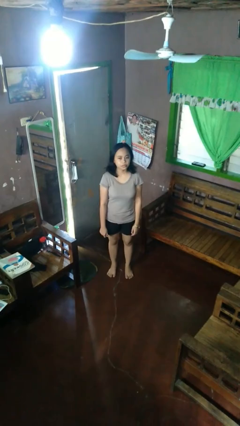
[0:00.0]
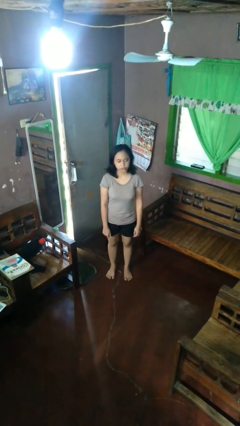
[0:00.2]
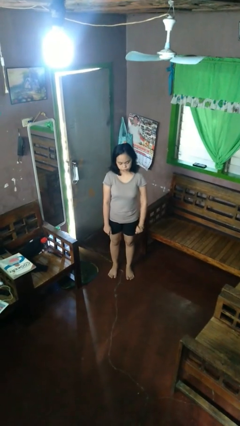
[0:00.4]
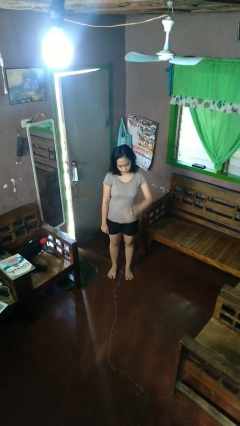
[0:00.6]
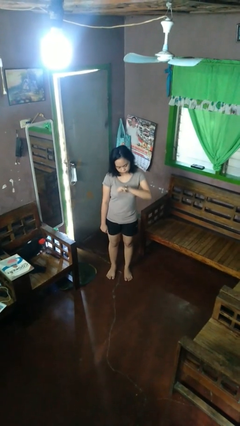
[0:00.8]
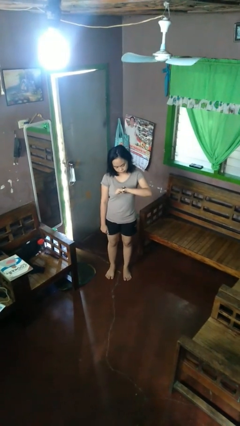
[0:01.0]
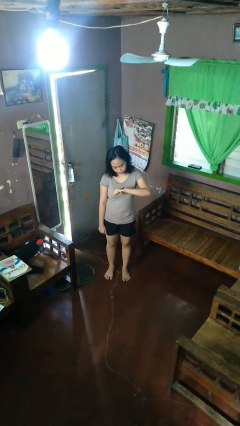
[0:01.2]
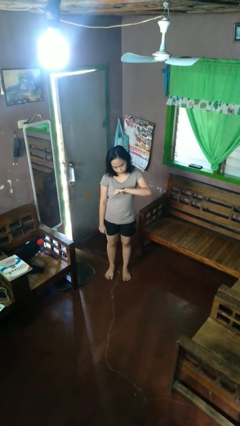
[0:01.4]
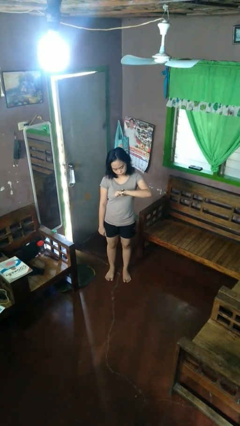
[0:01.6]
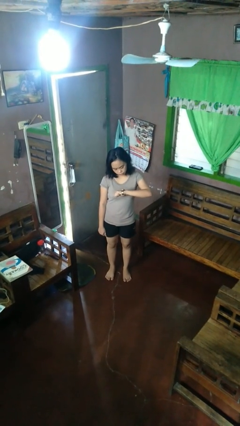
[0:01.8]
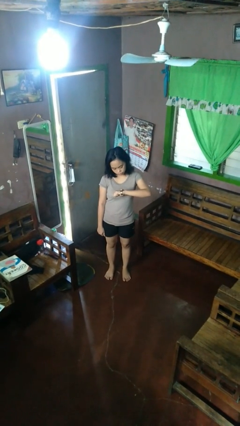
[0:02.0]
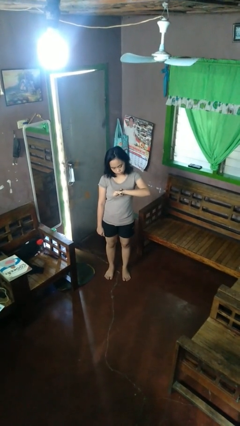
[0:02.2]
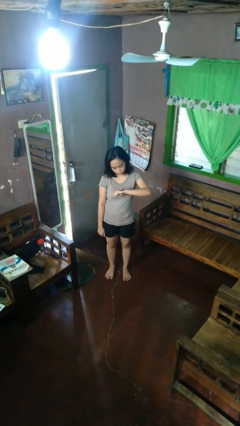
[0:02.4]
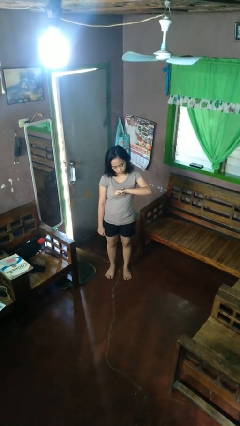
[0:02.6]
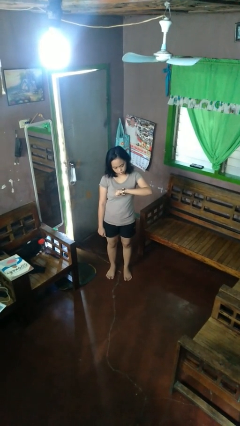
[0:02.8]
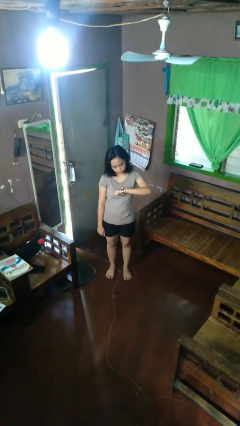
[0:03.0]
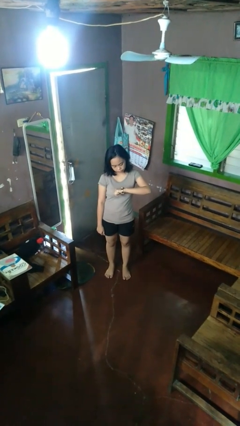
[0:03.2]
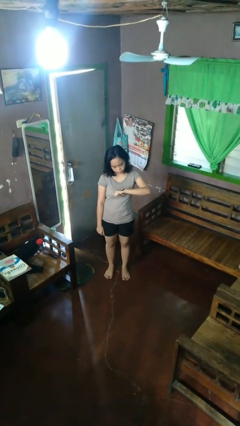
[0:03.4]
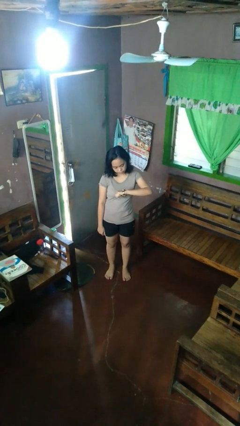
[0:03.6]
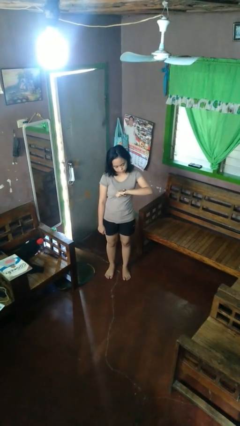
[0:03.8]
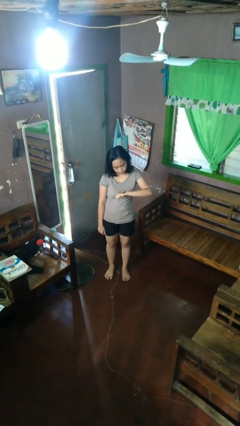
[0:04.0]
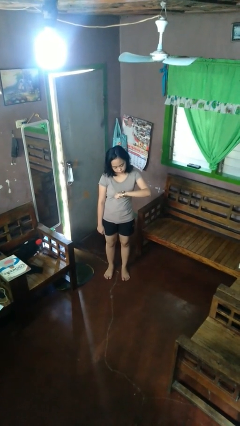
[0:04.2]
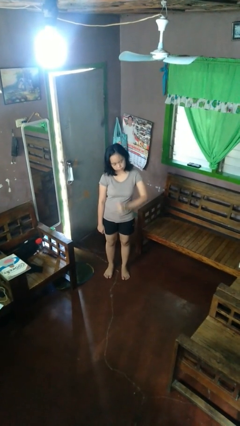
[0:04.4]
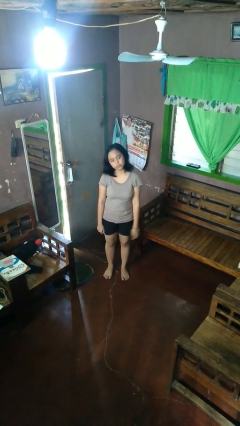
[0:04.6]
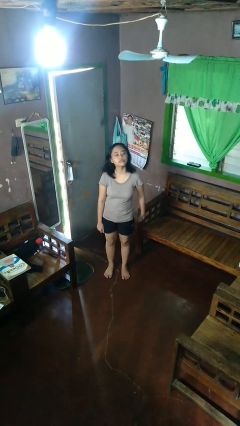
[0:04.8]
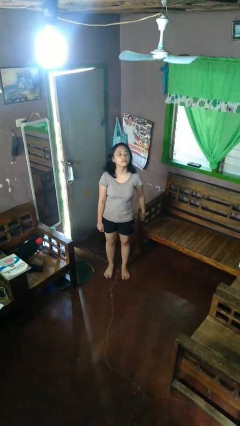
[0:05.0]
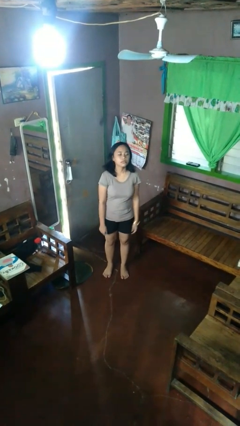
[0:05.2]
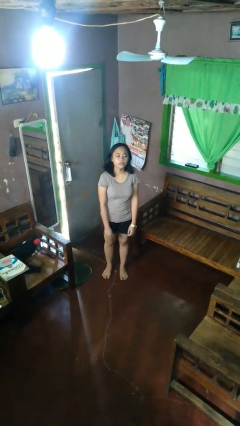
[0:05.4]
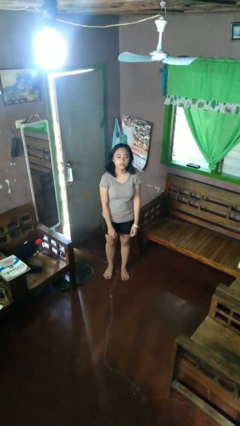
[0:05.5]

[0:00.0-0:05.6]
person looks at wristwatch

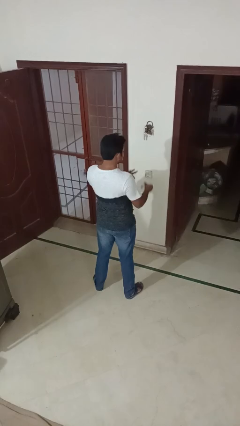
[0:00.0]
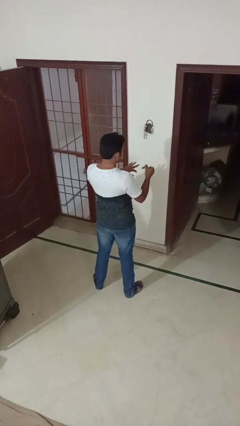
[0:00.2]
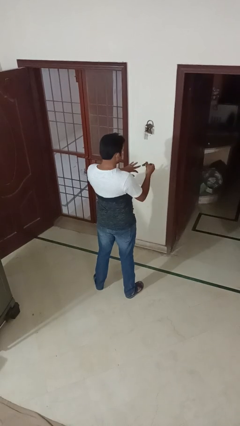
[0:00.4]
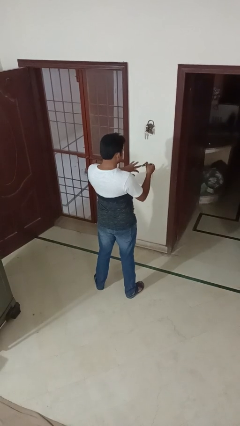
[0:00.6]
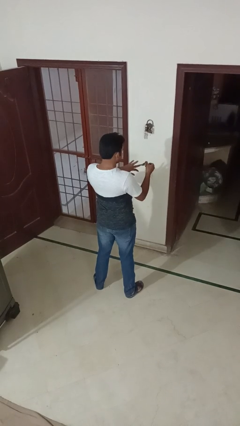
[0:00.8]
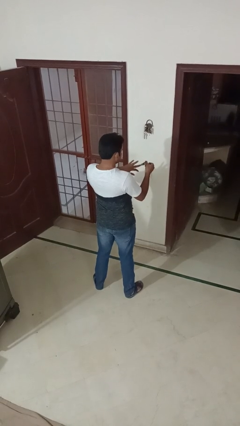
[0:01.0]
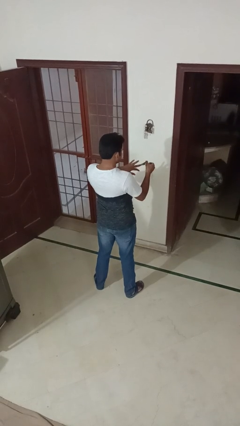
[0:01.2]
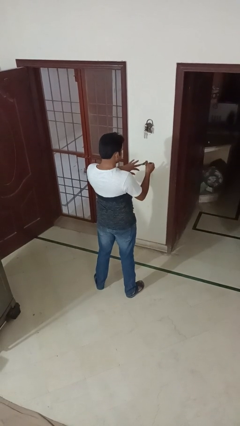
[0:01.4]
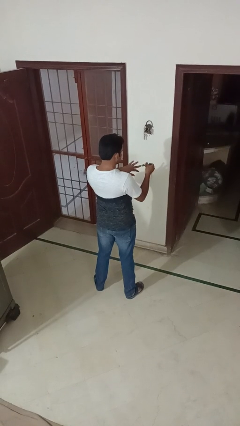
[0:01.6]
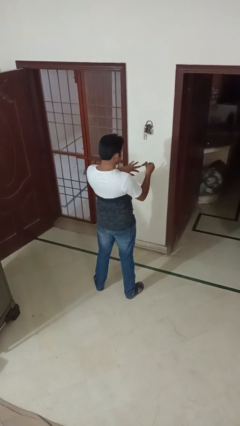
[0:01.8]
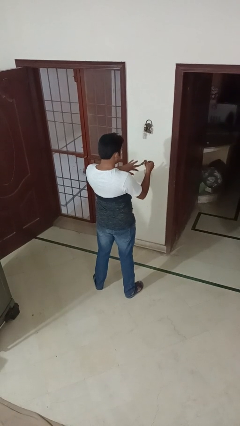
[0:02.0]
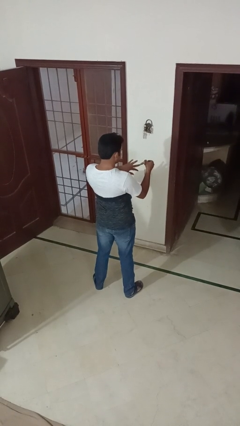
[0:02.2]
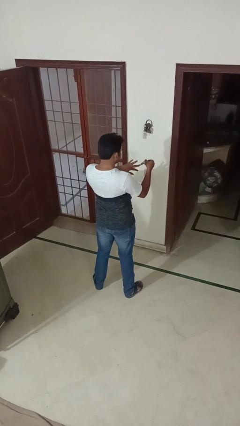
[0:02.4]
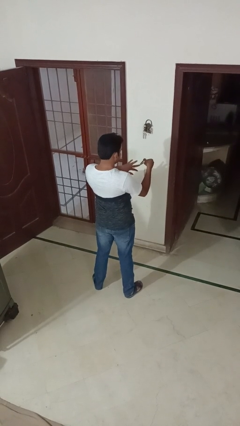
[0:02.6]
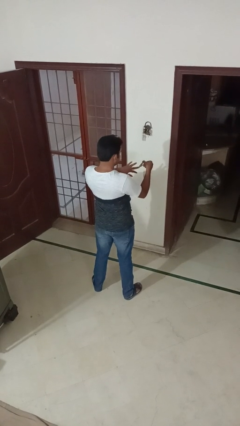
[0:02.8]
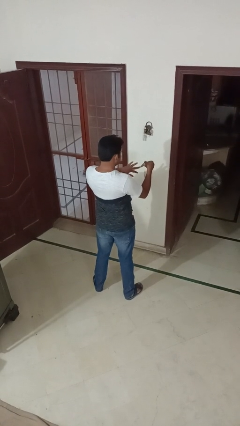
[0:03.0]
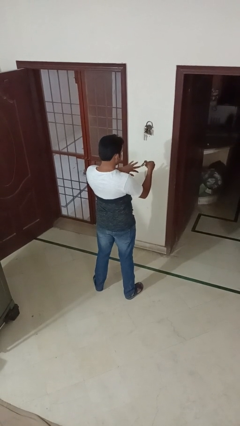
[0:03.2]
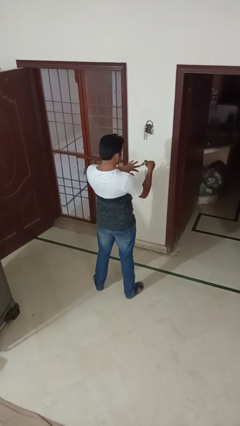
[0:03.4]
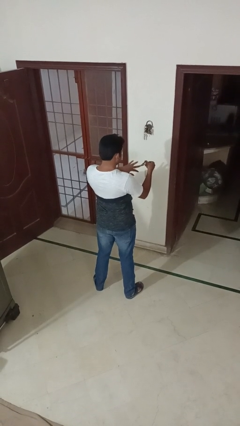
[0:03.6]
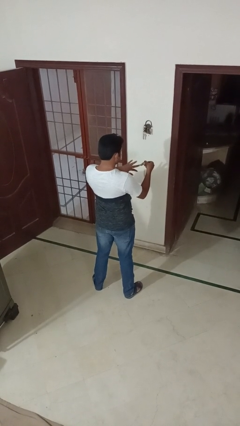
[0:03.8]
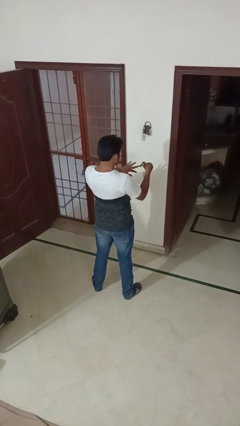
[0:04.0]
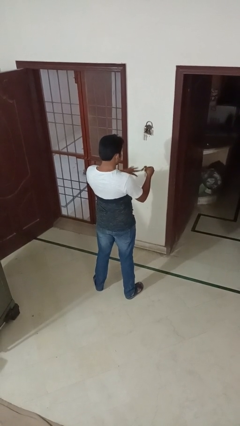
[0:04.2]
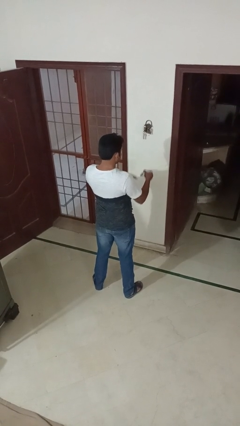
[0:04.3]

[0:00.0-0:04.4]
person clips fingernails

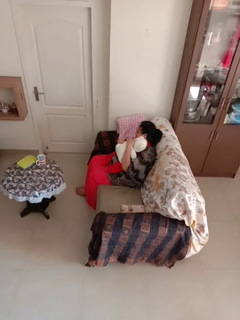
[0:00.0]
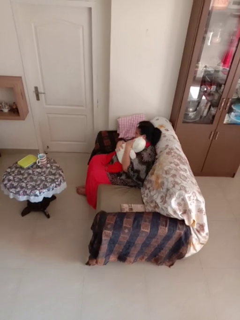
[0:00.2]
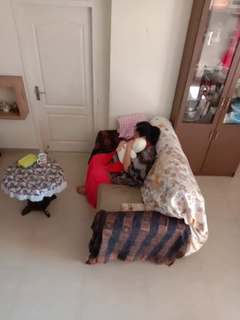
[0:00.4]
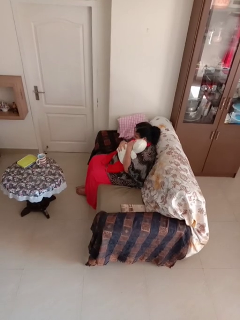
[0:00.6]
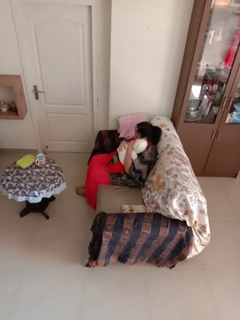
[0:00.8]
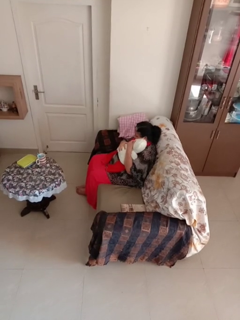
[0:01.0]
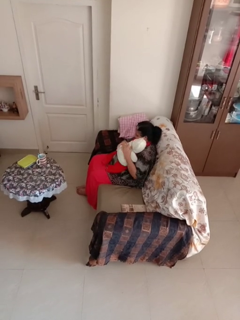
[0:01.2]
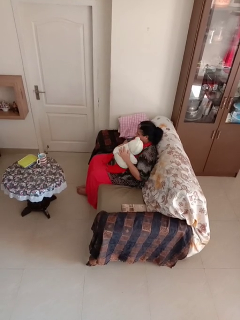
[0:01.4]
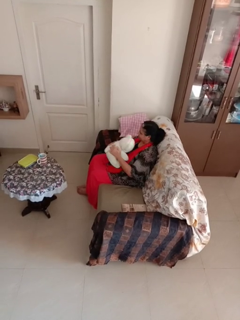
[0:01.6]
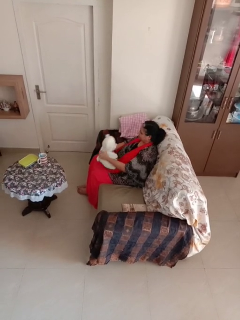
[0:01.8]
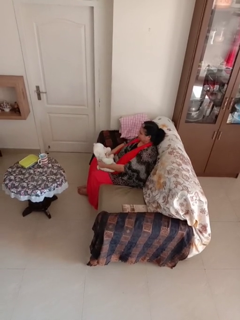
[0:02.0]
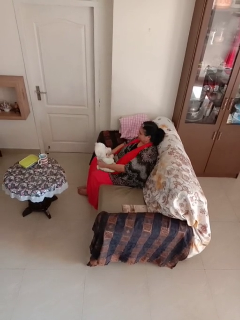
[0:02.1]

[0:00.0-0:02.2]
person hugs stuffed animal

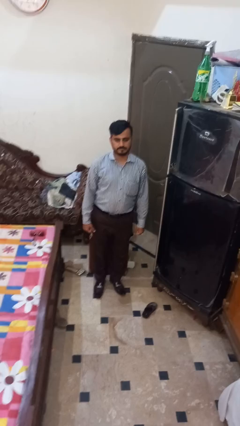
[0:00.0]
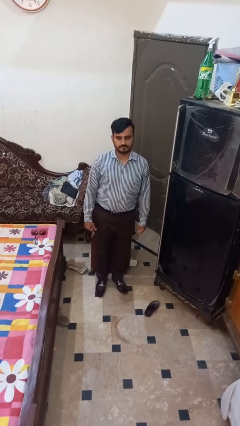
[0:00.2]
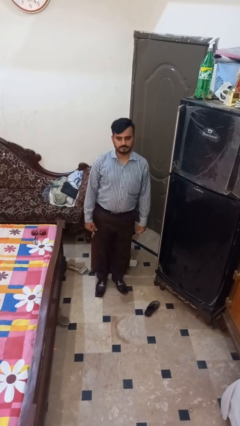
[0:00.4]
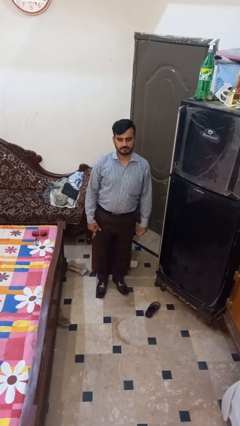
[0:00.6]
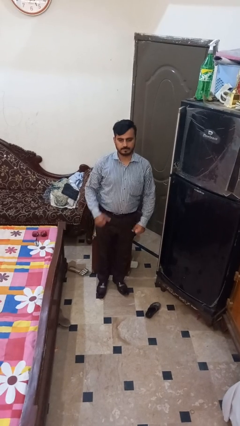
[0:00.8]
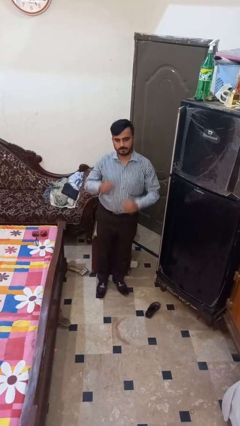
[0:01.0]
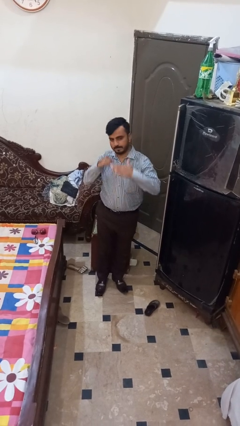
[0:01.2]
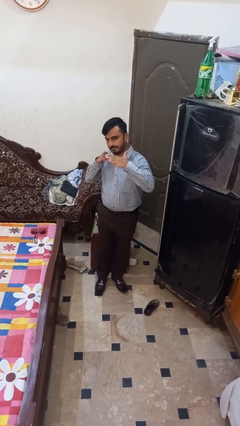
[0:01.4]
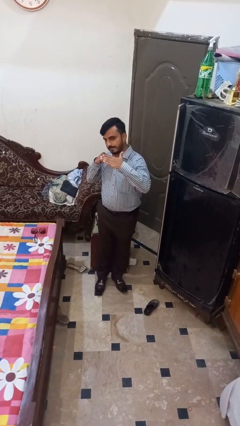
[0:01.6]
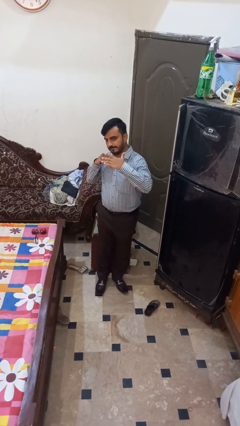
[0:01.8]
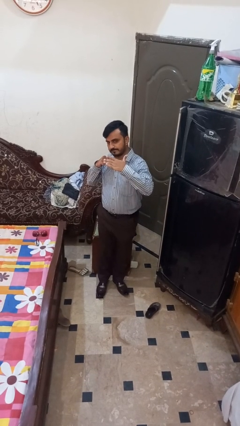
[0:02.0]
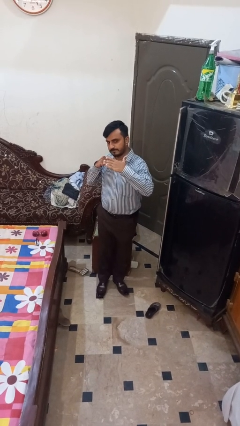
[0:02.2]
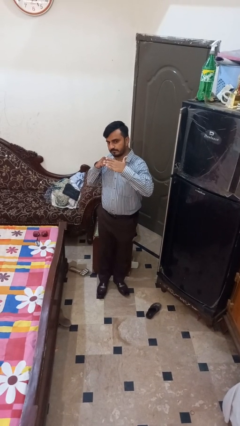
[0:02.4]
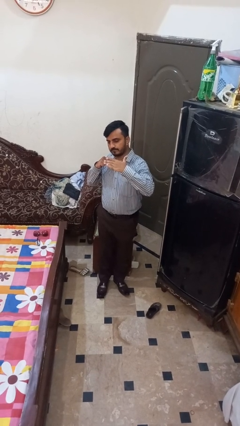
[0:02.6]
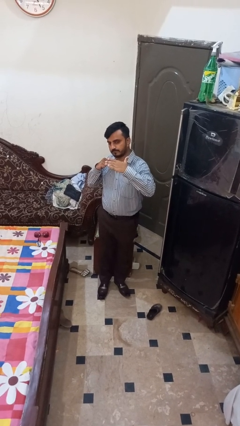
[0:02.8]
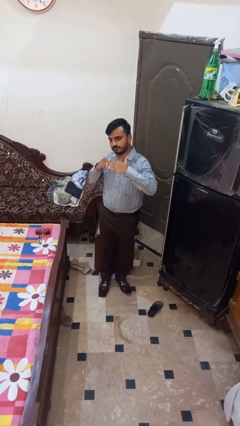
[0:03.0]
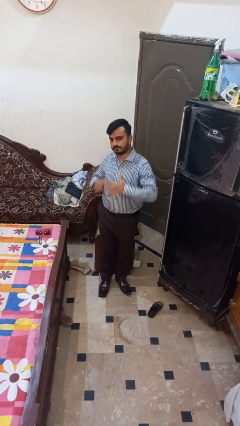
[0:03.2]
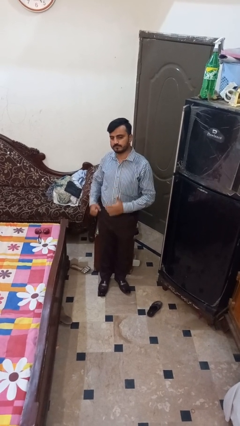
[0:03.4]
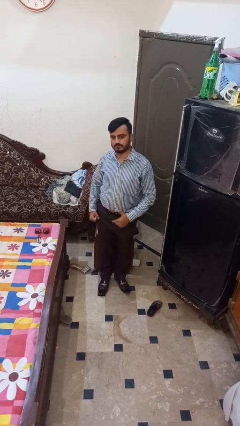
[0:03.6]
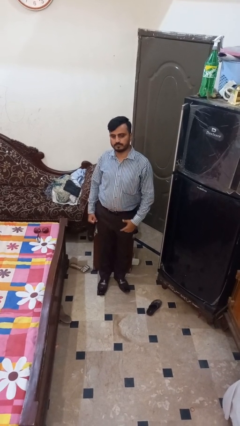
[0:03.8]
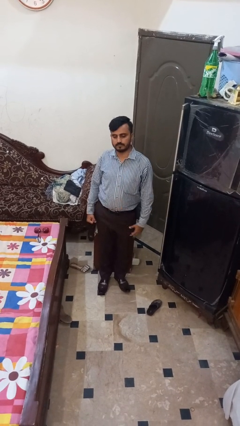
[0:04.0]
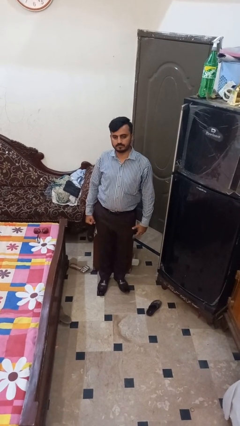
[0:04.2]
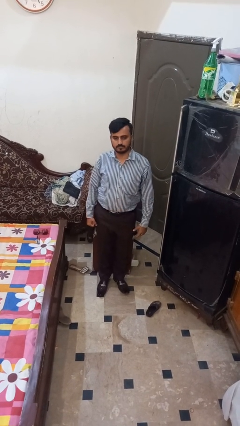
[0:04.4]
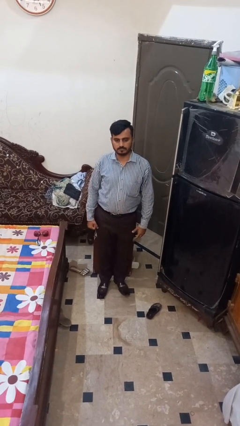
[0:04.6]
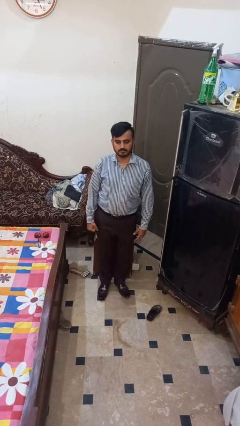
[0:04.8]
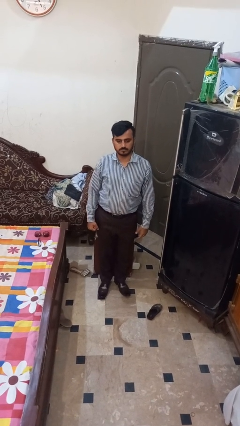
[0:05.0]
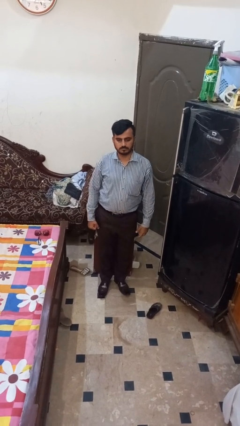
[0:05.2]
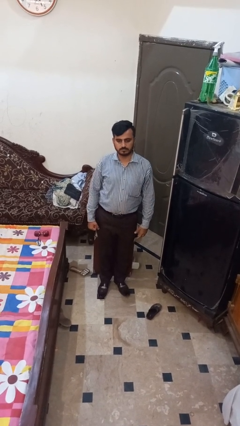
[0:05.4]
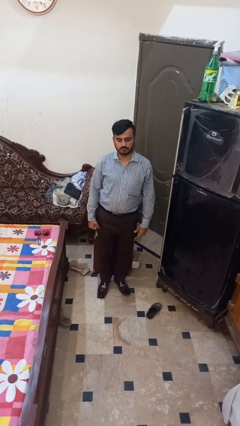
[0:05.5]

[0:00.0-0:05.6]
person karate chop

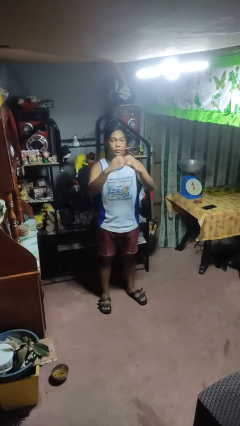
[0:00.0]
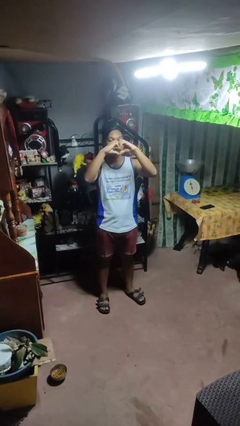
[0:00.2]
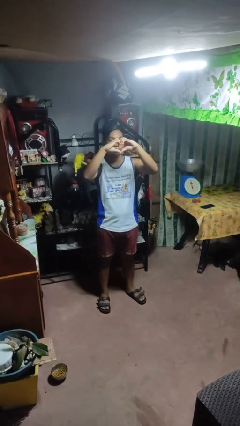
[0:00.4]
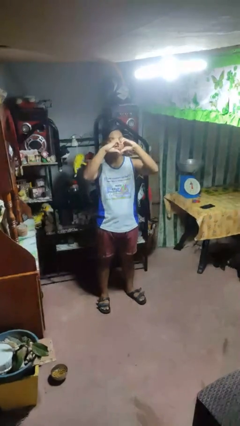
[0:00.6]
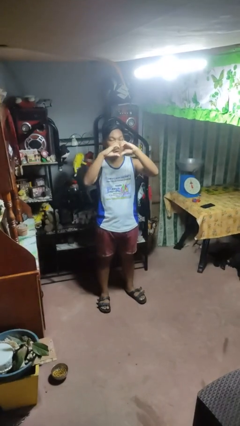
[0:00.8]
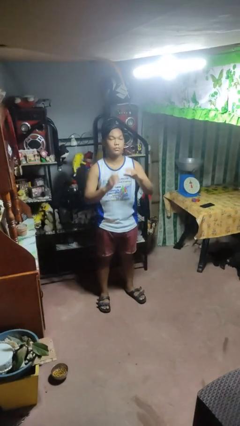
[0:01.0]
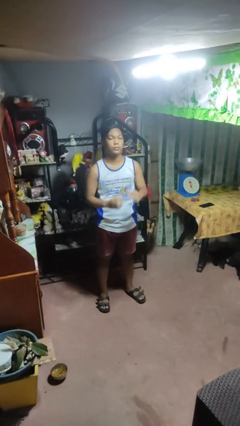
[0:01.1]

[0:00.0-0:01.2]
person gestures heart
